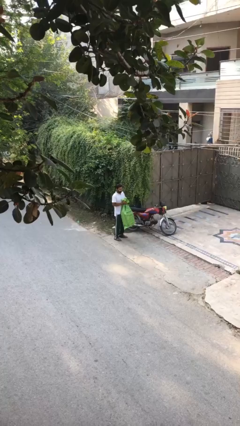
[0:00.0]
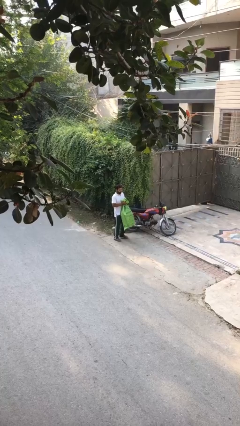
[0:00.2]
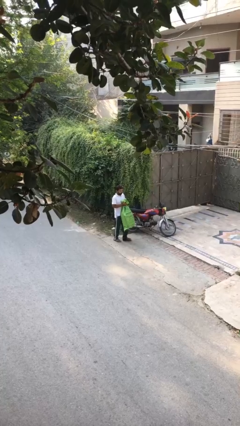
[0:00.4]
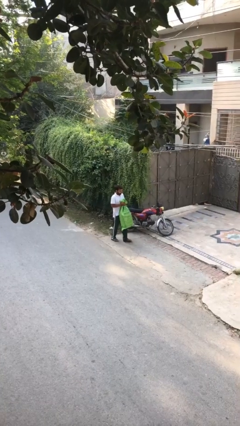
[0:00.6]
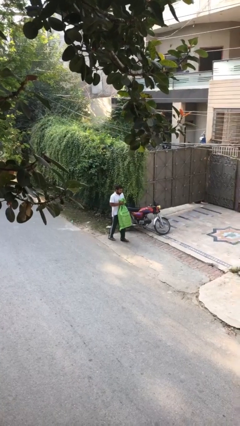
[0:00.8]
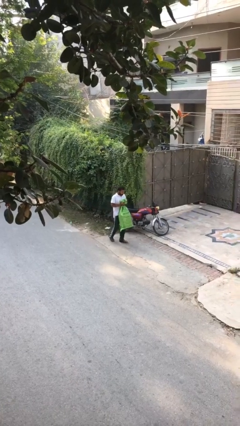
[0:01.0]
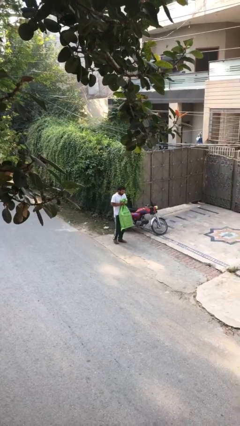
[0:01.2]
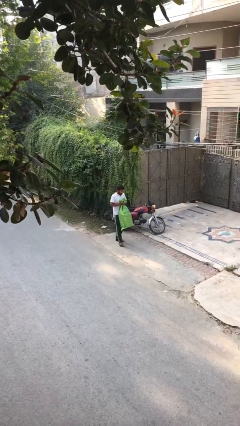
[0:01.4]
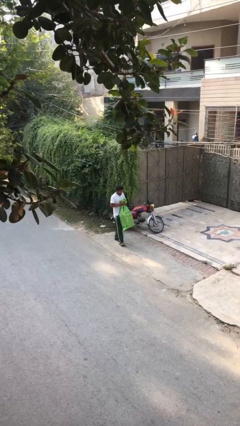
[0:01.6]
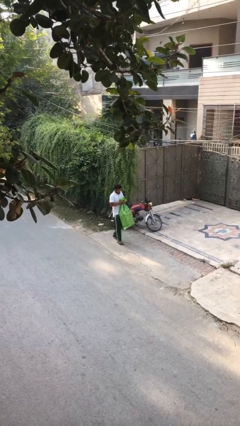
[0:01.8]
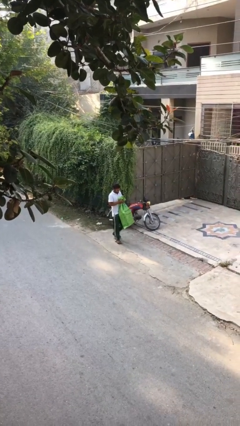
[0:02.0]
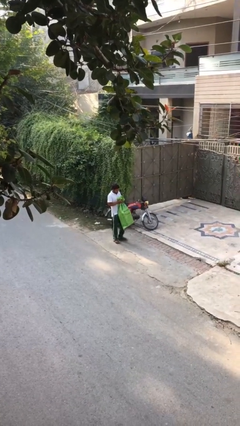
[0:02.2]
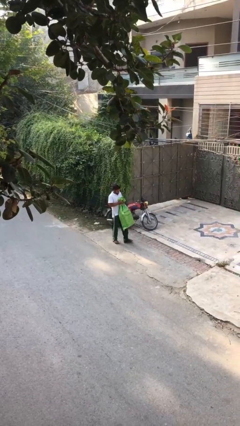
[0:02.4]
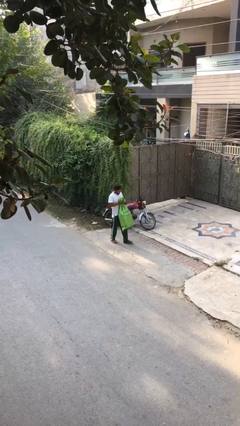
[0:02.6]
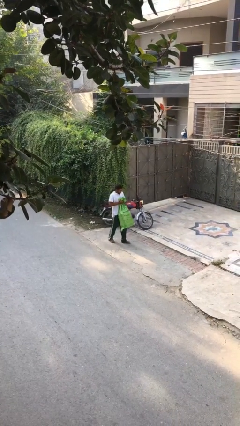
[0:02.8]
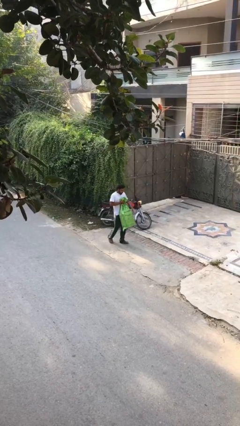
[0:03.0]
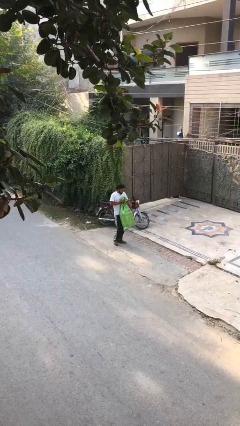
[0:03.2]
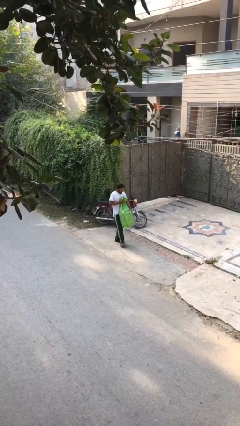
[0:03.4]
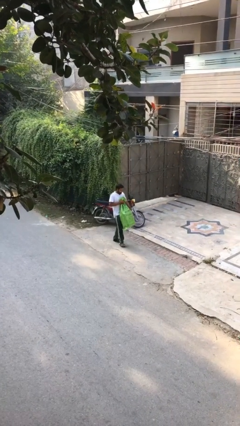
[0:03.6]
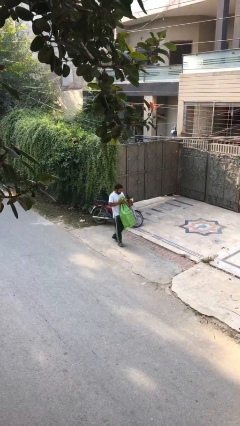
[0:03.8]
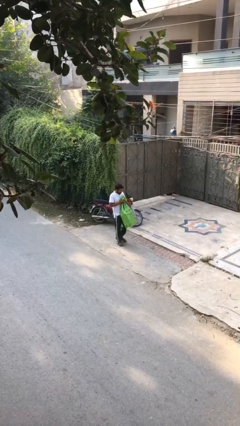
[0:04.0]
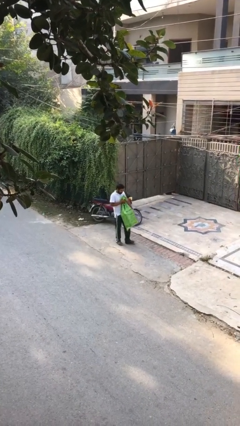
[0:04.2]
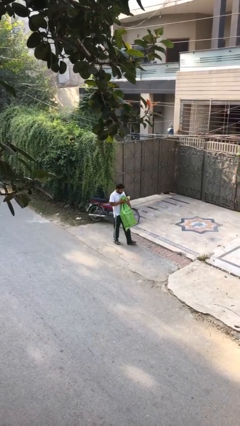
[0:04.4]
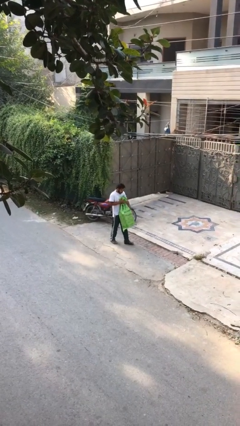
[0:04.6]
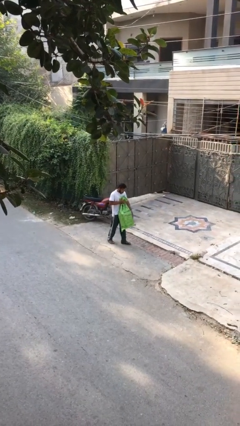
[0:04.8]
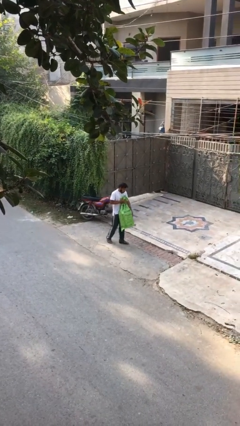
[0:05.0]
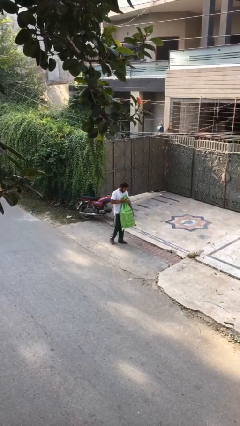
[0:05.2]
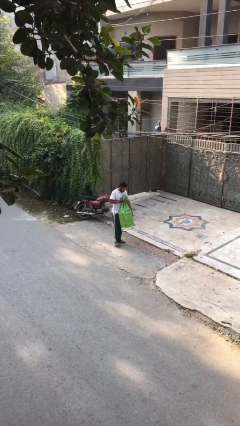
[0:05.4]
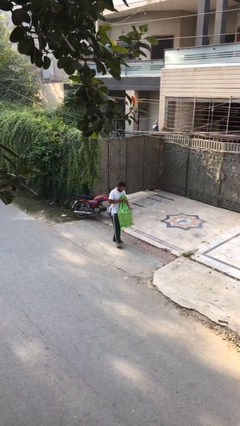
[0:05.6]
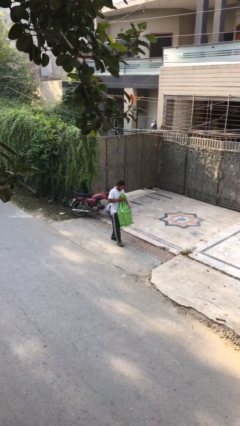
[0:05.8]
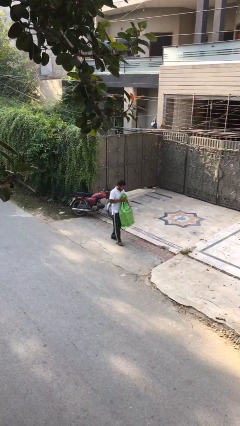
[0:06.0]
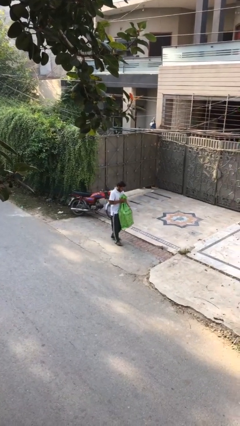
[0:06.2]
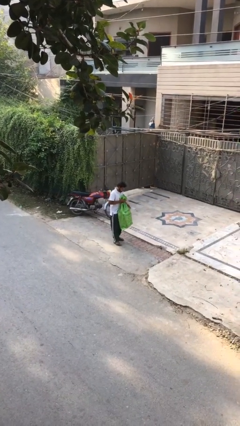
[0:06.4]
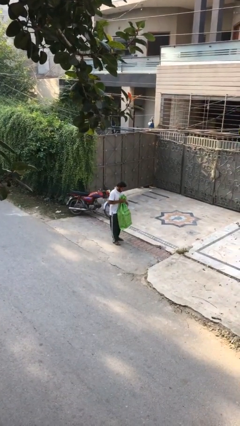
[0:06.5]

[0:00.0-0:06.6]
person carries heavy object

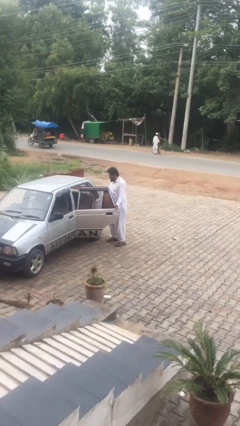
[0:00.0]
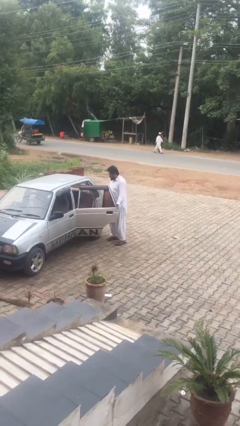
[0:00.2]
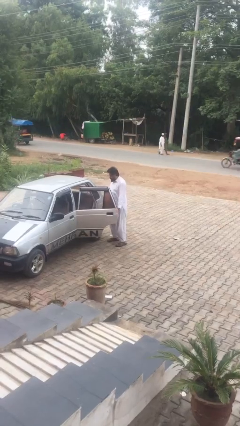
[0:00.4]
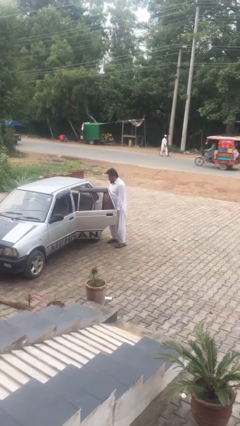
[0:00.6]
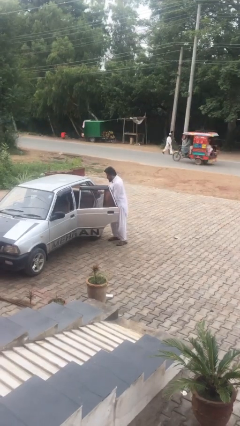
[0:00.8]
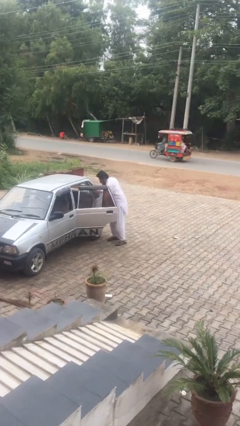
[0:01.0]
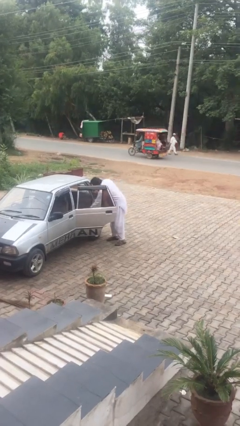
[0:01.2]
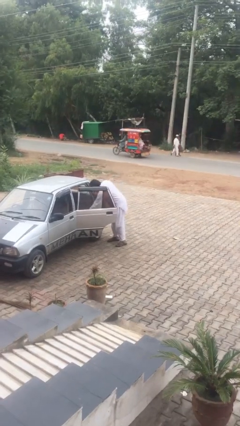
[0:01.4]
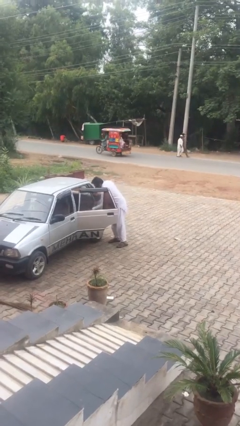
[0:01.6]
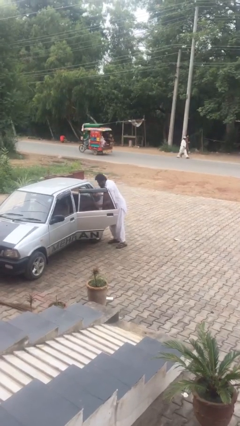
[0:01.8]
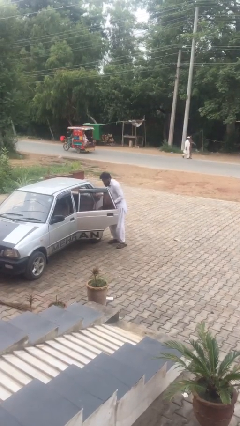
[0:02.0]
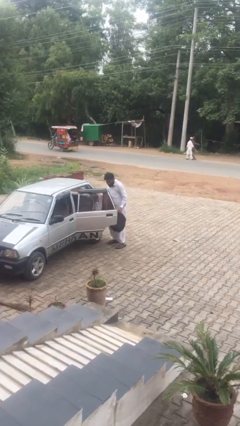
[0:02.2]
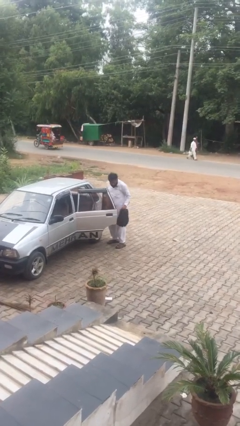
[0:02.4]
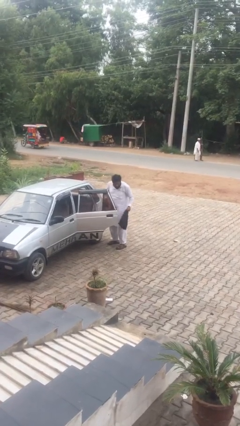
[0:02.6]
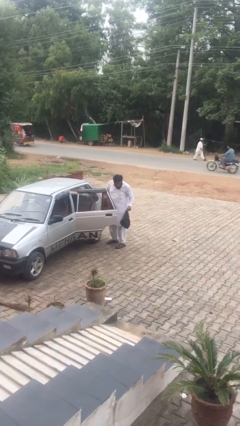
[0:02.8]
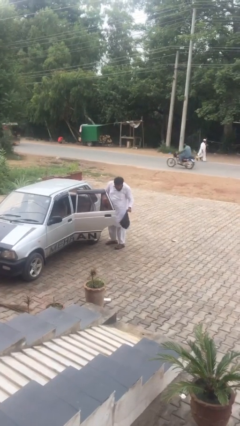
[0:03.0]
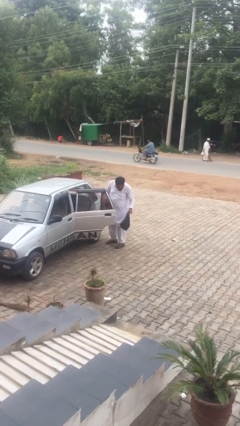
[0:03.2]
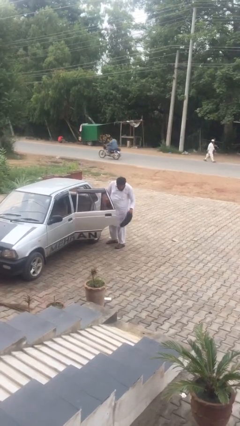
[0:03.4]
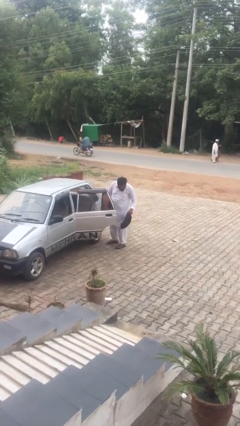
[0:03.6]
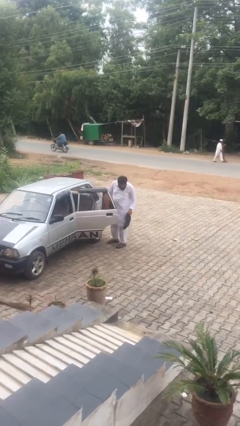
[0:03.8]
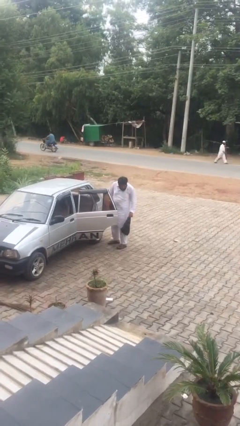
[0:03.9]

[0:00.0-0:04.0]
person unloads car

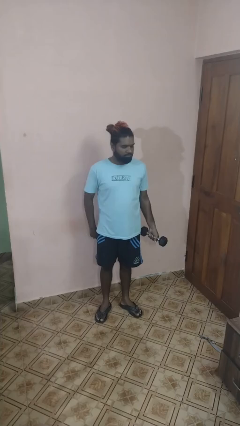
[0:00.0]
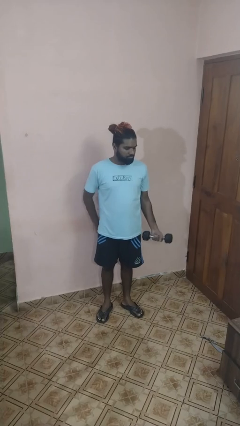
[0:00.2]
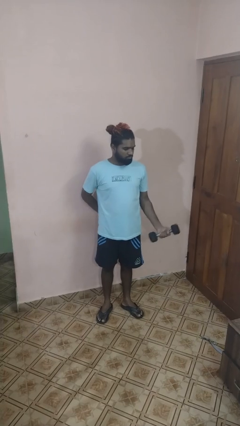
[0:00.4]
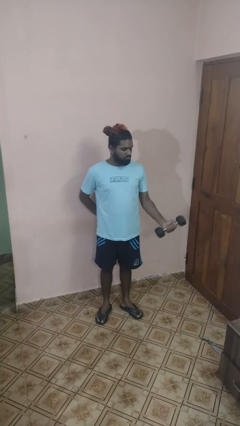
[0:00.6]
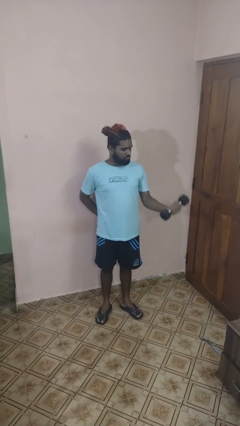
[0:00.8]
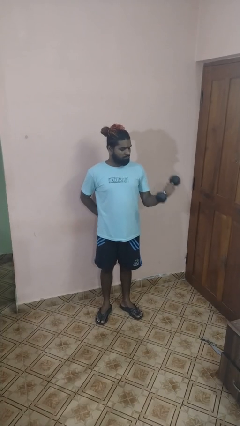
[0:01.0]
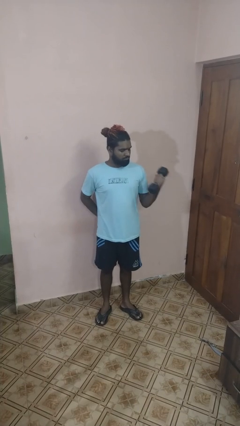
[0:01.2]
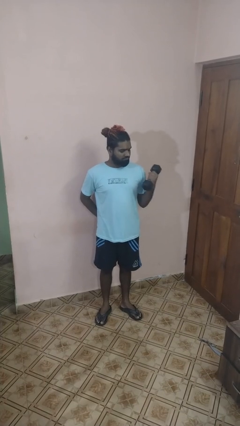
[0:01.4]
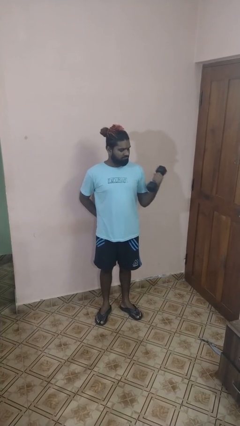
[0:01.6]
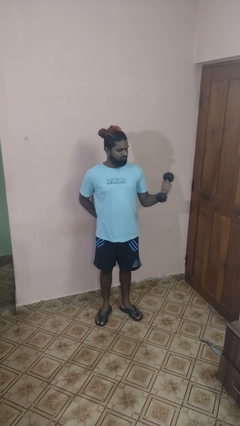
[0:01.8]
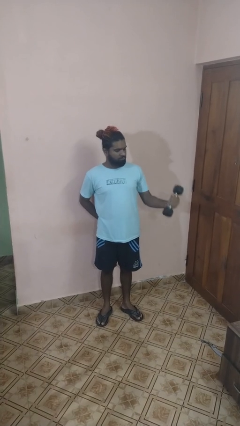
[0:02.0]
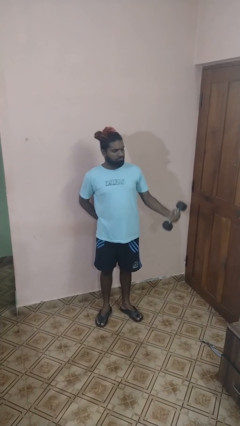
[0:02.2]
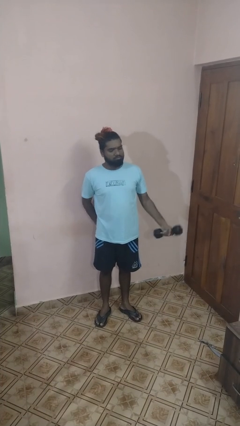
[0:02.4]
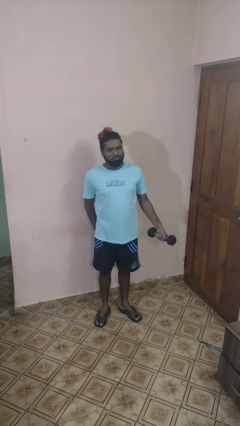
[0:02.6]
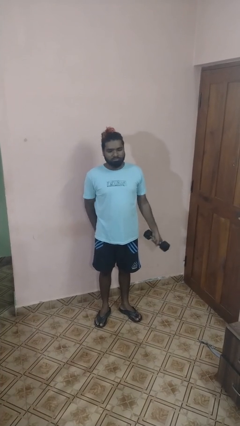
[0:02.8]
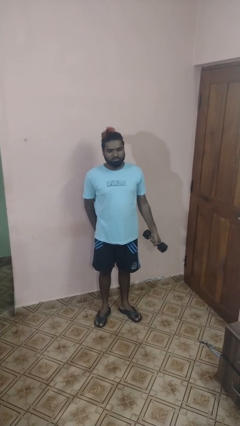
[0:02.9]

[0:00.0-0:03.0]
person lifts dumbbells

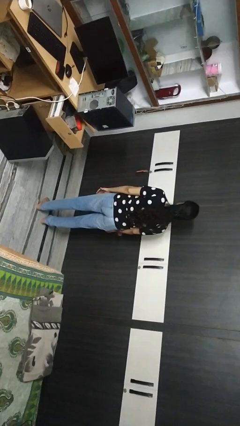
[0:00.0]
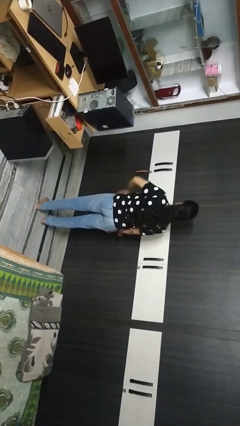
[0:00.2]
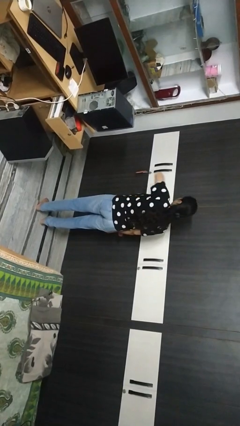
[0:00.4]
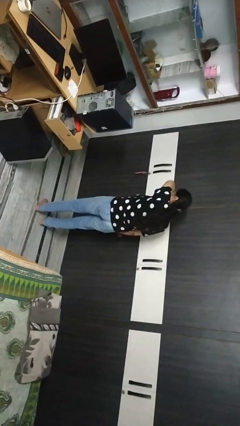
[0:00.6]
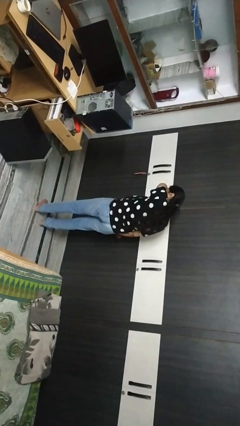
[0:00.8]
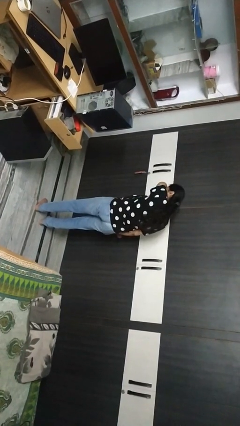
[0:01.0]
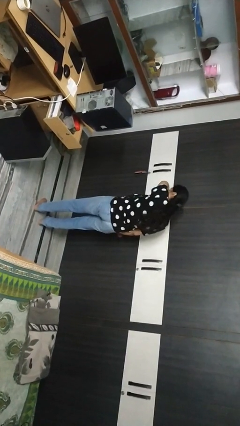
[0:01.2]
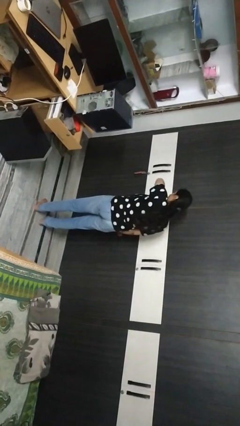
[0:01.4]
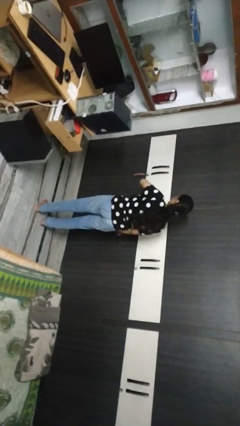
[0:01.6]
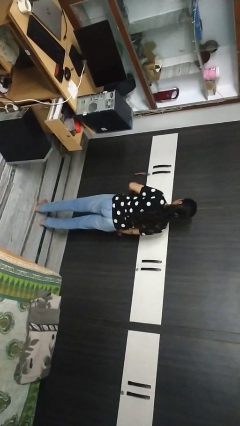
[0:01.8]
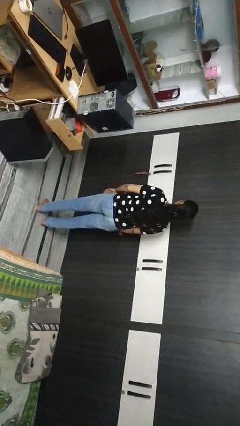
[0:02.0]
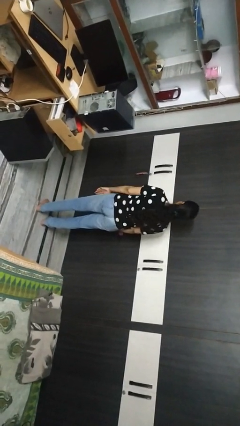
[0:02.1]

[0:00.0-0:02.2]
person sneezes into arm

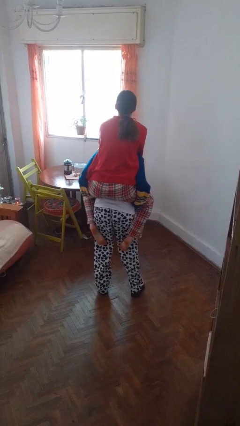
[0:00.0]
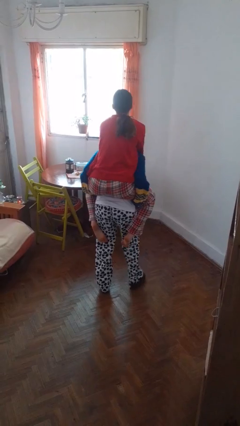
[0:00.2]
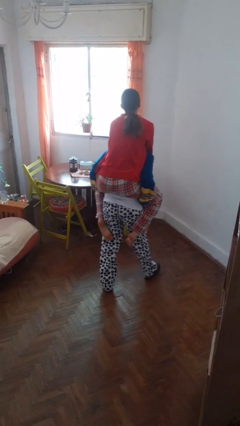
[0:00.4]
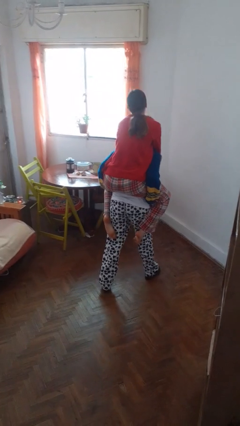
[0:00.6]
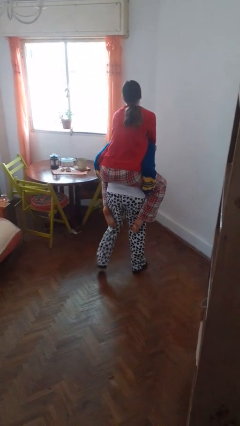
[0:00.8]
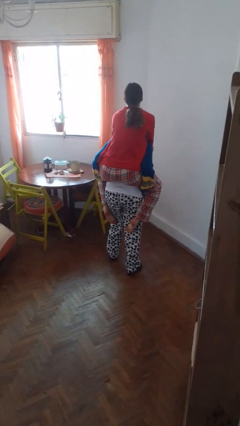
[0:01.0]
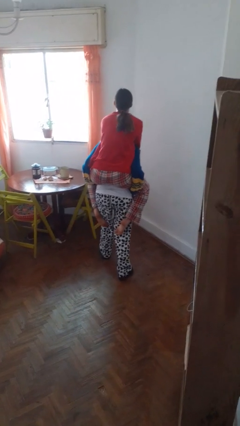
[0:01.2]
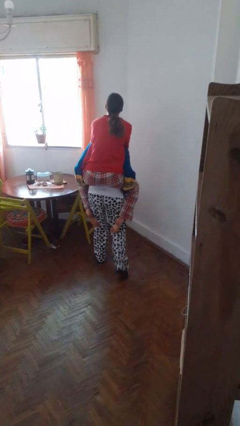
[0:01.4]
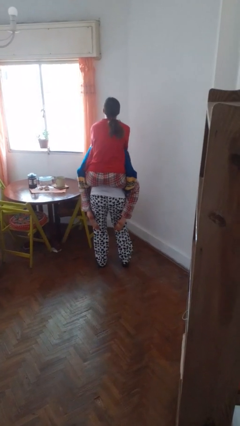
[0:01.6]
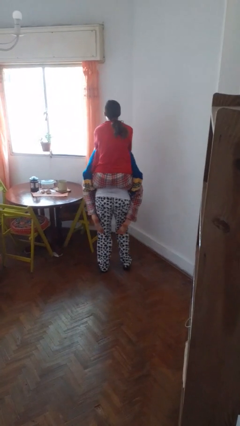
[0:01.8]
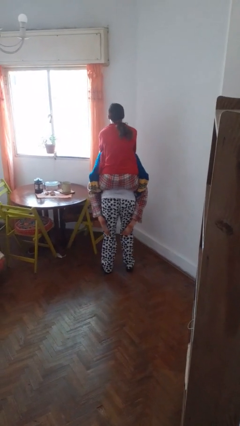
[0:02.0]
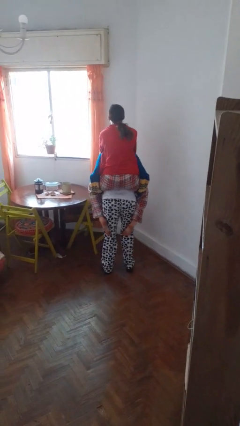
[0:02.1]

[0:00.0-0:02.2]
person carries person on back
